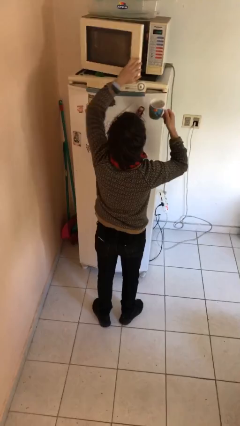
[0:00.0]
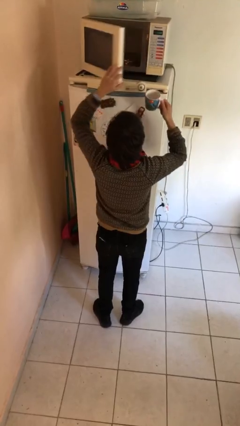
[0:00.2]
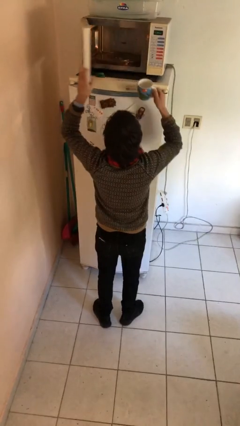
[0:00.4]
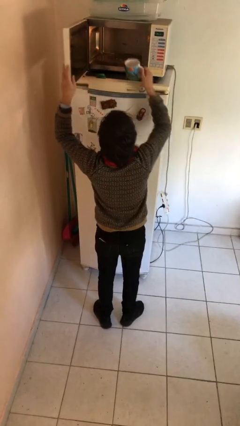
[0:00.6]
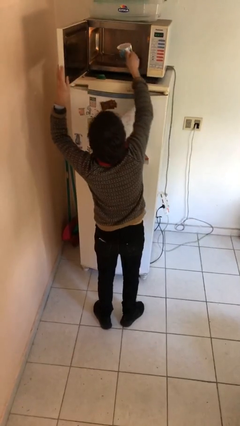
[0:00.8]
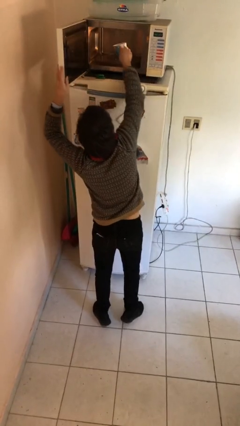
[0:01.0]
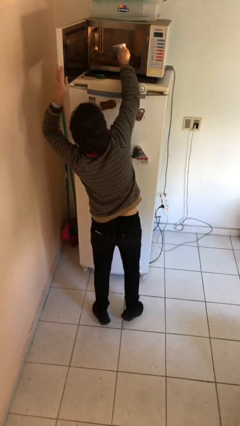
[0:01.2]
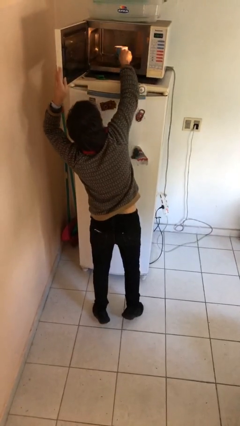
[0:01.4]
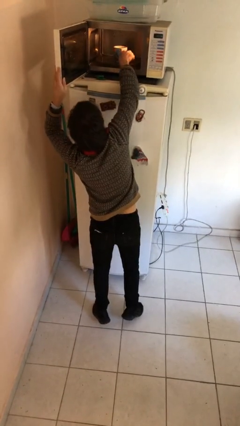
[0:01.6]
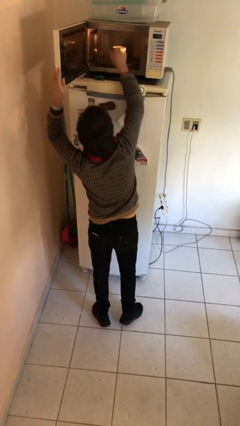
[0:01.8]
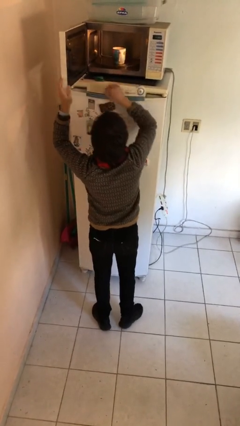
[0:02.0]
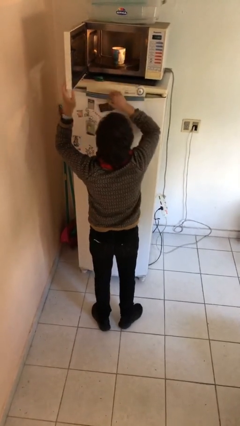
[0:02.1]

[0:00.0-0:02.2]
person puts object into microwave

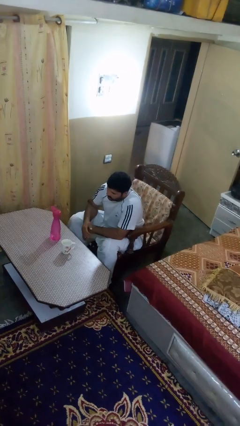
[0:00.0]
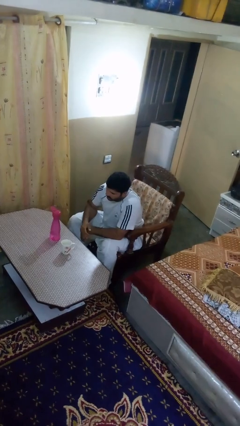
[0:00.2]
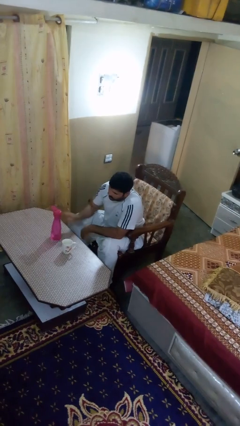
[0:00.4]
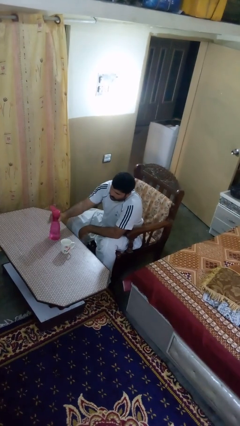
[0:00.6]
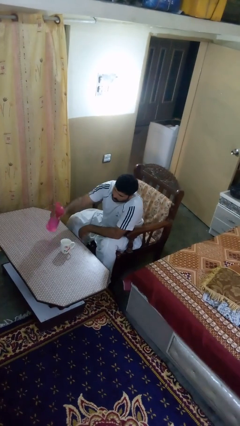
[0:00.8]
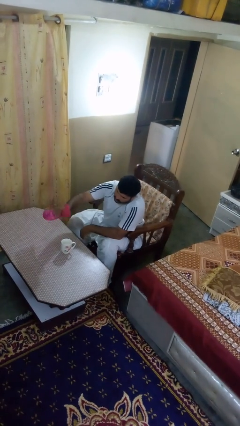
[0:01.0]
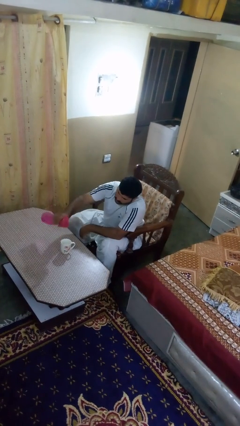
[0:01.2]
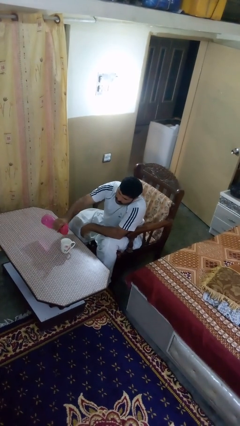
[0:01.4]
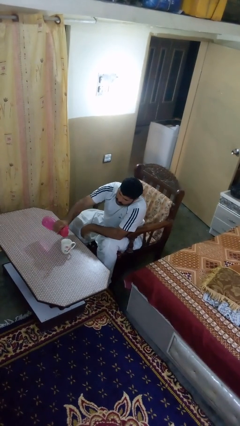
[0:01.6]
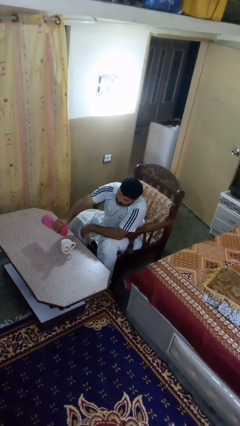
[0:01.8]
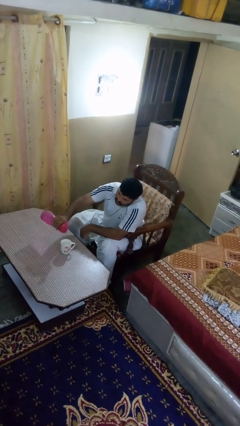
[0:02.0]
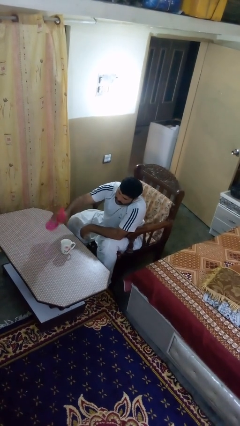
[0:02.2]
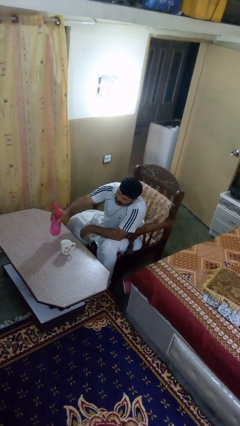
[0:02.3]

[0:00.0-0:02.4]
person pours liquid into cup

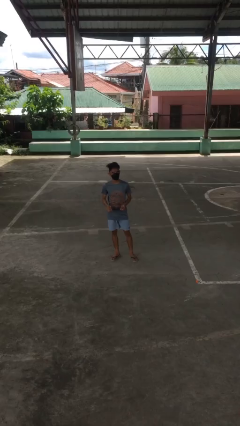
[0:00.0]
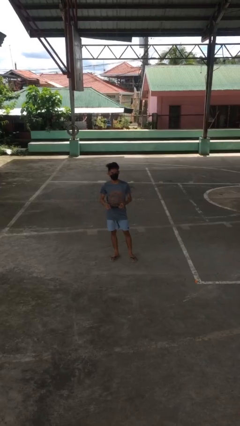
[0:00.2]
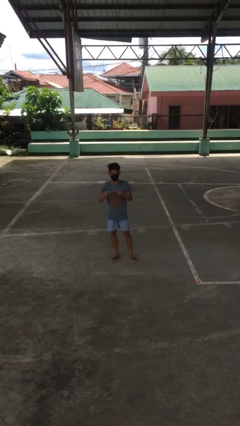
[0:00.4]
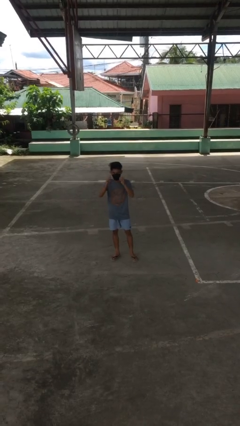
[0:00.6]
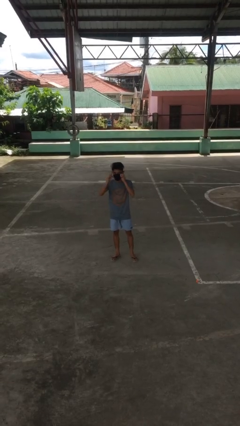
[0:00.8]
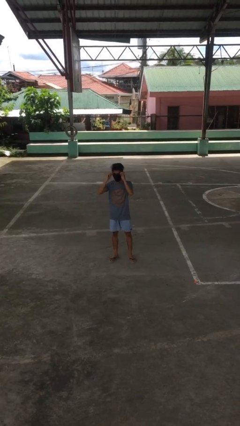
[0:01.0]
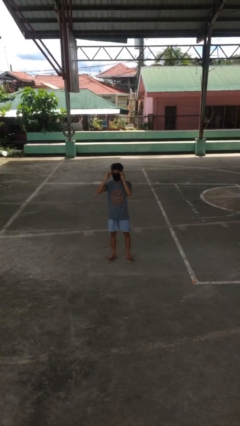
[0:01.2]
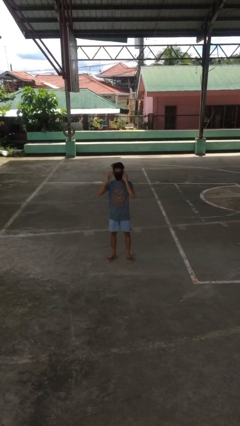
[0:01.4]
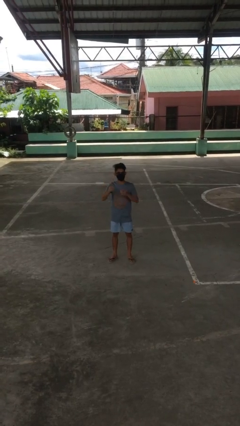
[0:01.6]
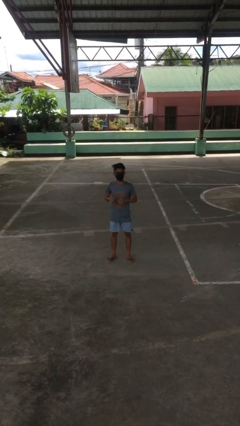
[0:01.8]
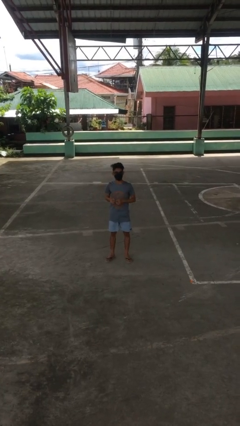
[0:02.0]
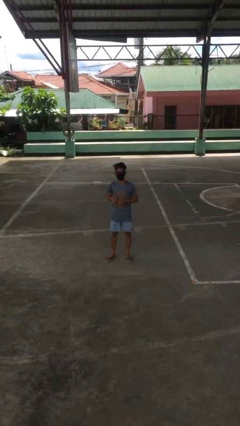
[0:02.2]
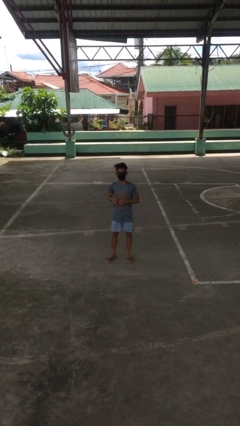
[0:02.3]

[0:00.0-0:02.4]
person puts on glasses

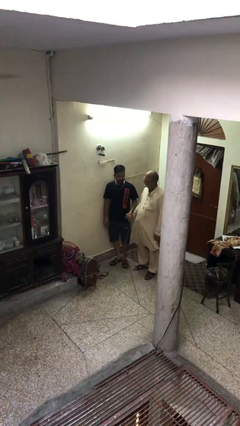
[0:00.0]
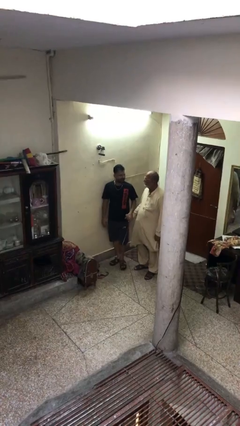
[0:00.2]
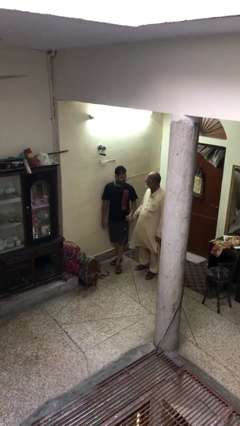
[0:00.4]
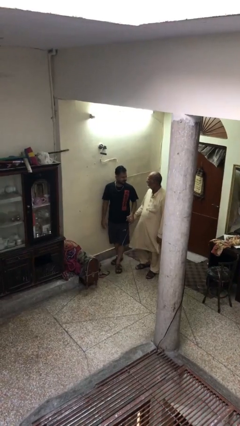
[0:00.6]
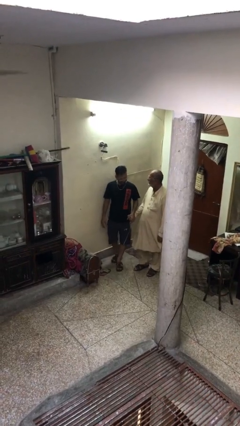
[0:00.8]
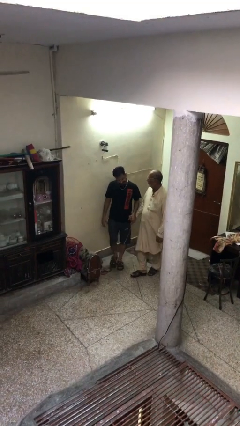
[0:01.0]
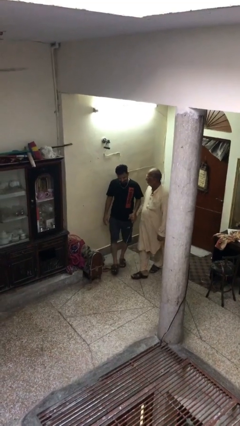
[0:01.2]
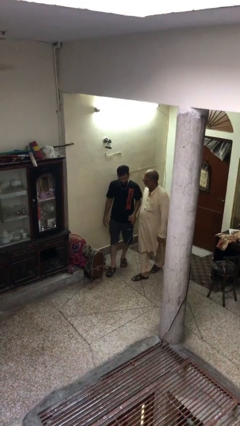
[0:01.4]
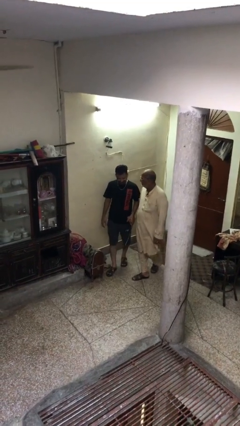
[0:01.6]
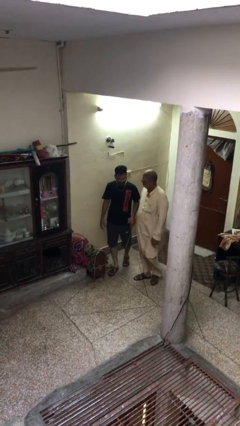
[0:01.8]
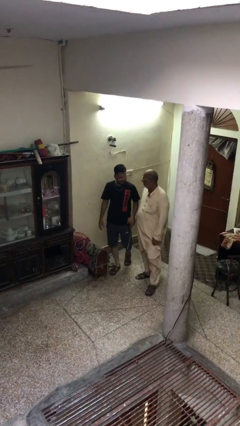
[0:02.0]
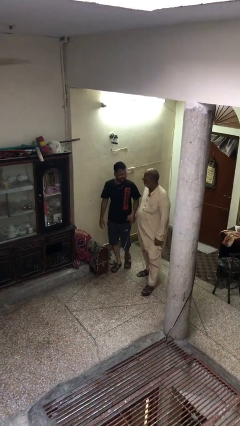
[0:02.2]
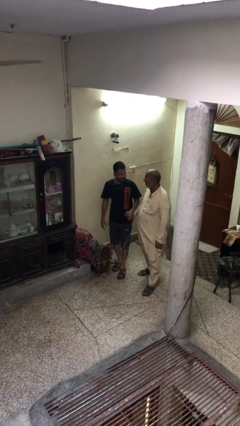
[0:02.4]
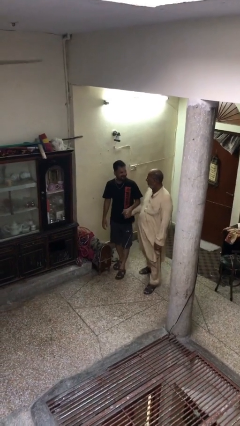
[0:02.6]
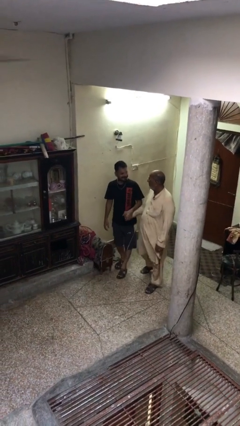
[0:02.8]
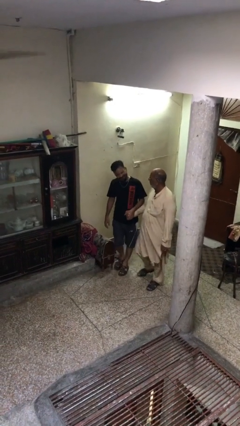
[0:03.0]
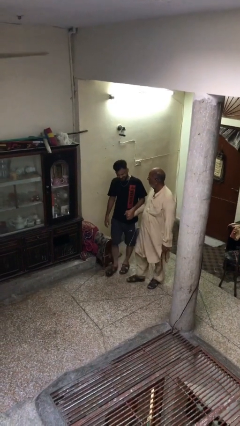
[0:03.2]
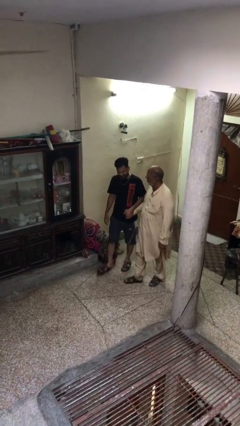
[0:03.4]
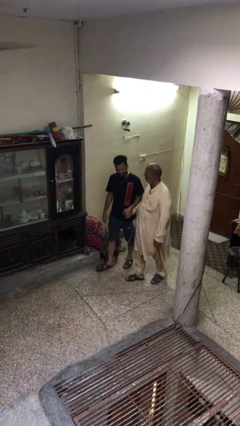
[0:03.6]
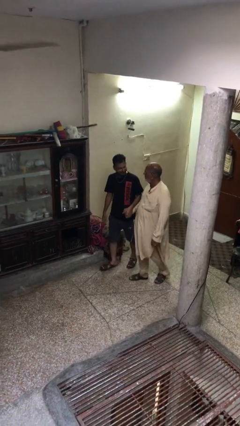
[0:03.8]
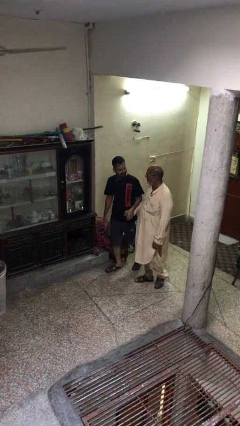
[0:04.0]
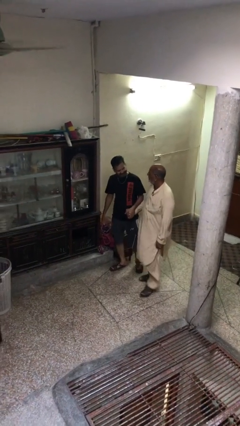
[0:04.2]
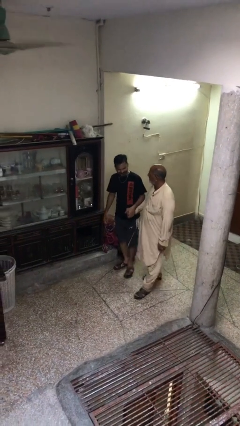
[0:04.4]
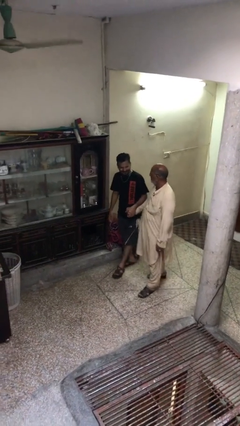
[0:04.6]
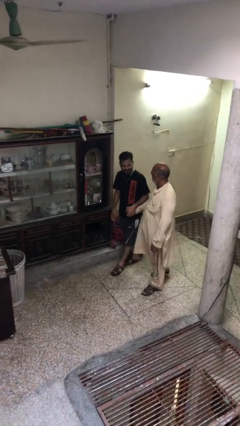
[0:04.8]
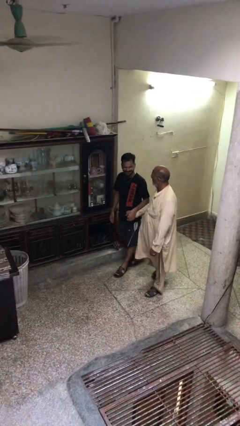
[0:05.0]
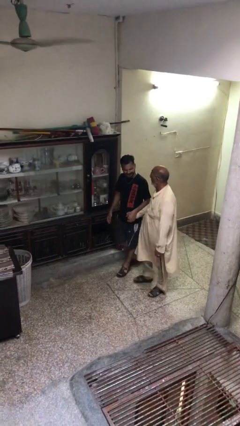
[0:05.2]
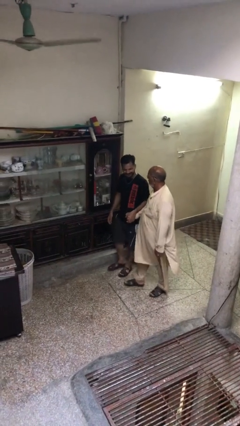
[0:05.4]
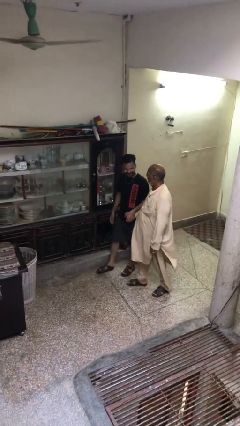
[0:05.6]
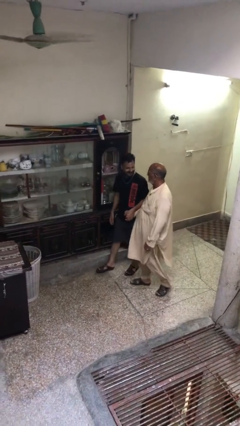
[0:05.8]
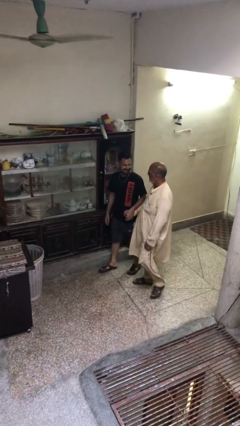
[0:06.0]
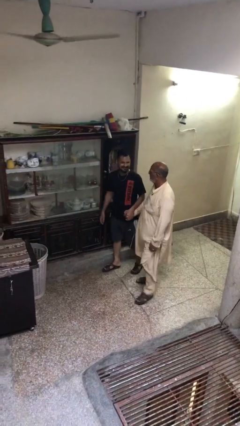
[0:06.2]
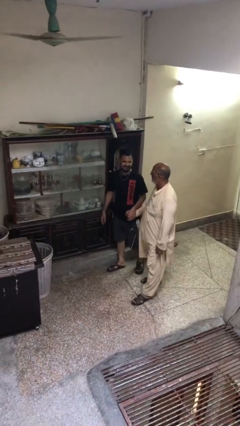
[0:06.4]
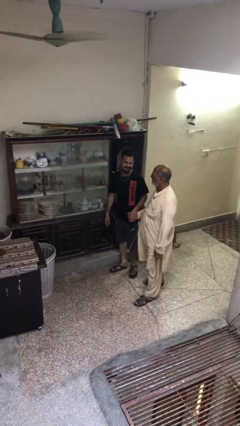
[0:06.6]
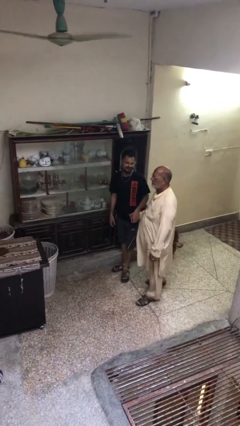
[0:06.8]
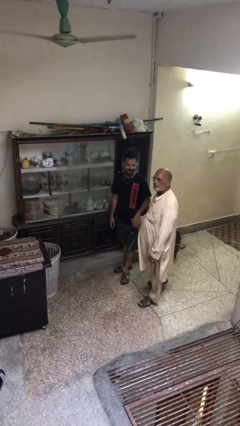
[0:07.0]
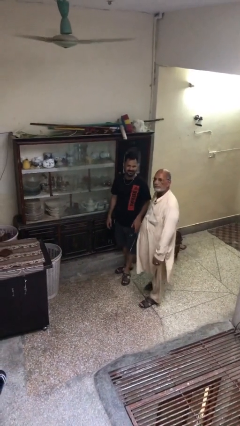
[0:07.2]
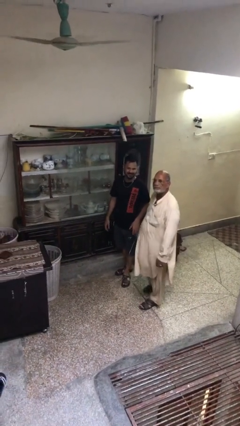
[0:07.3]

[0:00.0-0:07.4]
person holds hand

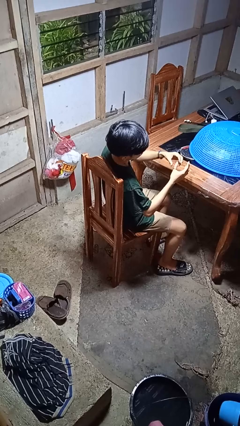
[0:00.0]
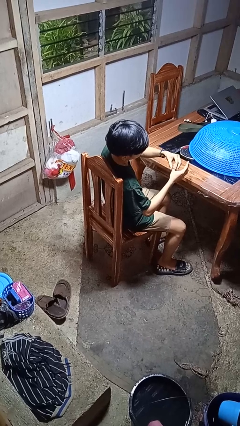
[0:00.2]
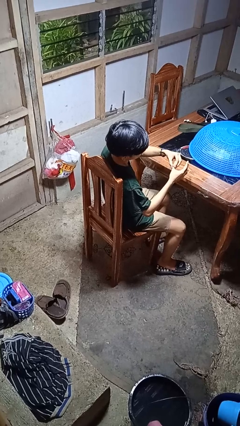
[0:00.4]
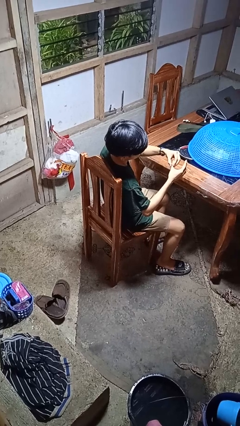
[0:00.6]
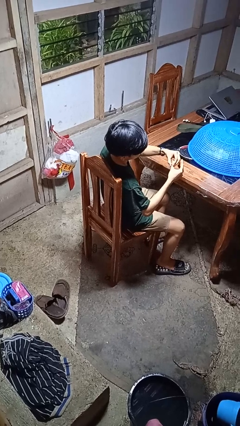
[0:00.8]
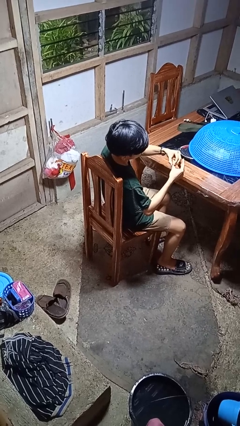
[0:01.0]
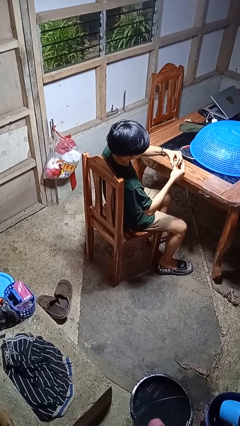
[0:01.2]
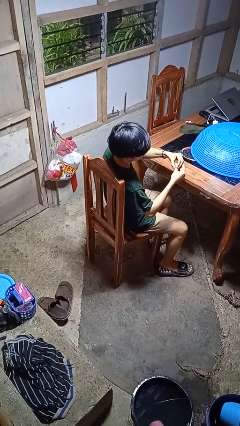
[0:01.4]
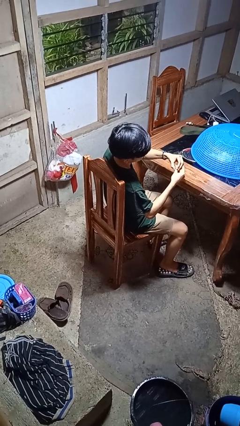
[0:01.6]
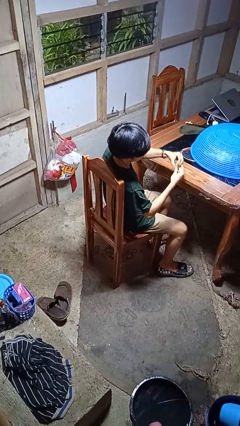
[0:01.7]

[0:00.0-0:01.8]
person takes off ring

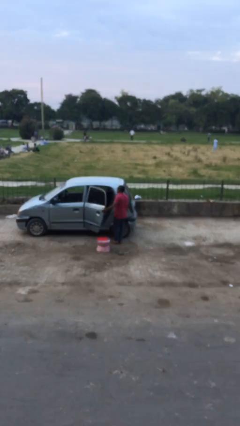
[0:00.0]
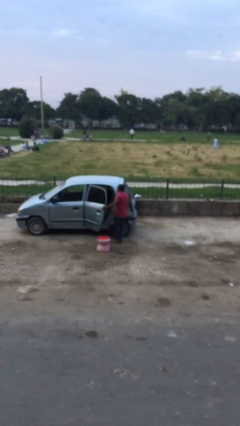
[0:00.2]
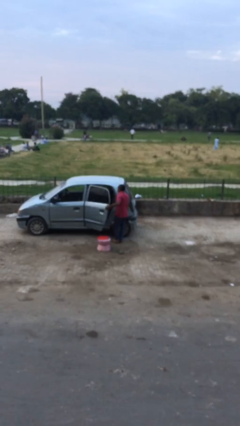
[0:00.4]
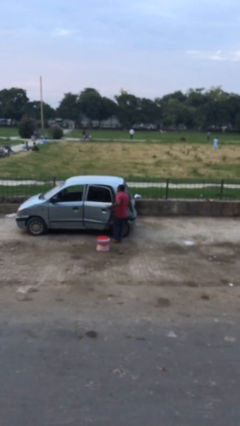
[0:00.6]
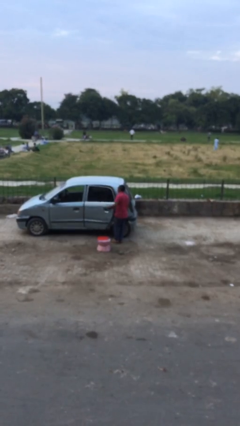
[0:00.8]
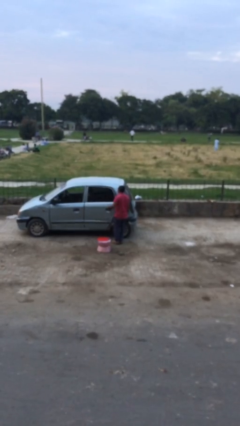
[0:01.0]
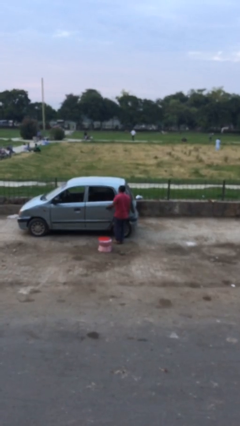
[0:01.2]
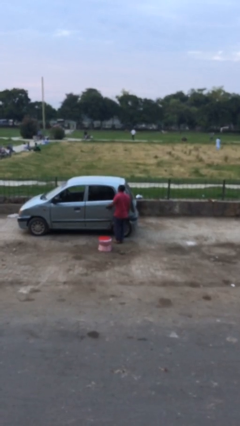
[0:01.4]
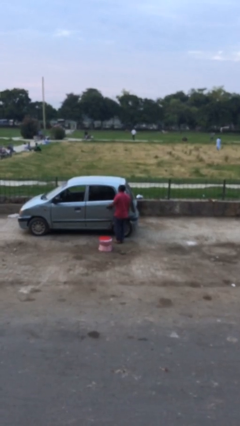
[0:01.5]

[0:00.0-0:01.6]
person closes car door
